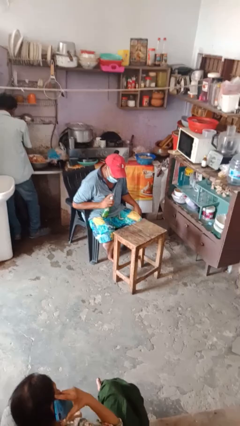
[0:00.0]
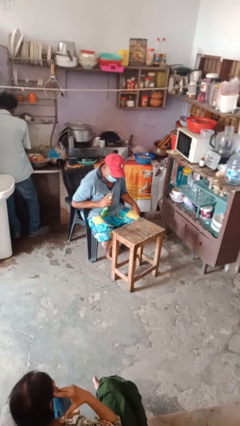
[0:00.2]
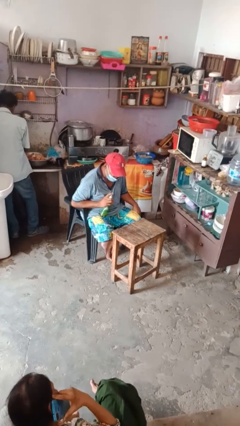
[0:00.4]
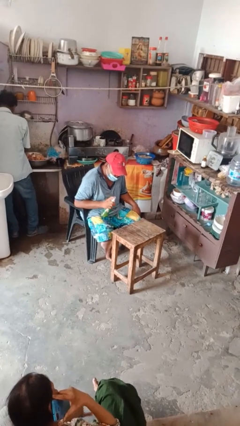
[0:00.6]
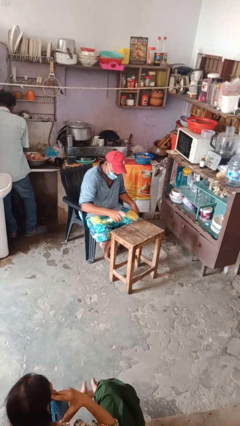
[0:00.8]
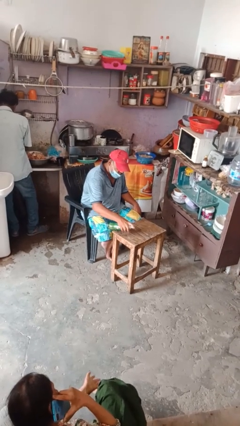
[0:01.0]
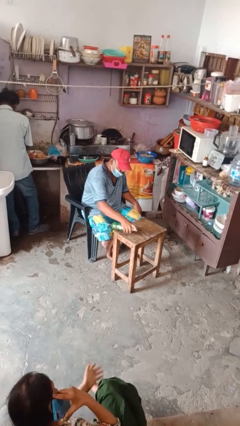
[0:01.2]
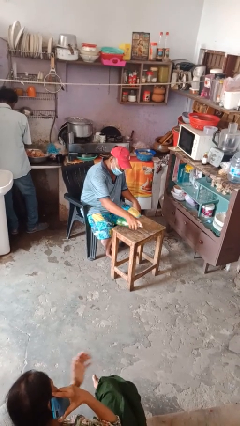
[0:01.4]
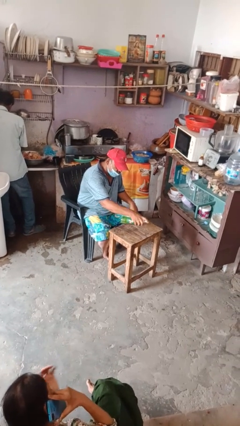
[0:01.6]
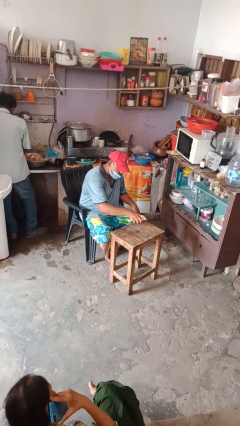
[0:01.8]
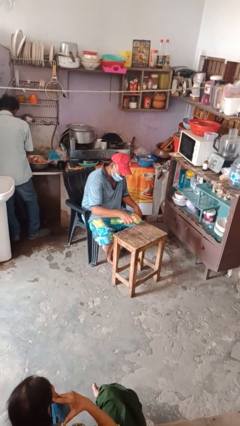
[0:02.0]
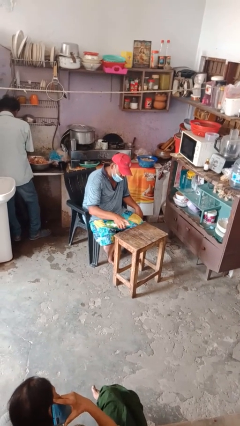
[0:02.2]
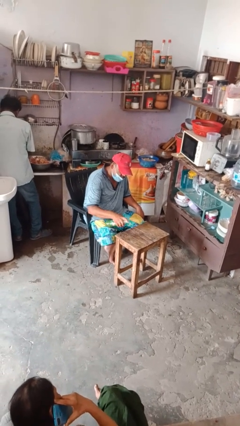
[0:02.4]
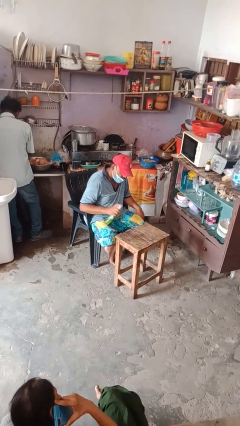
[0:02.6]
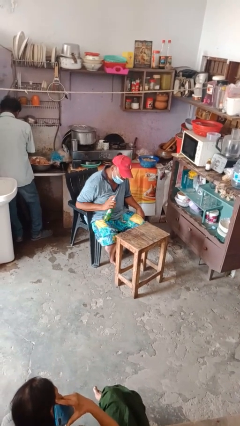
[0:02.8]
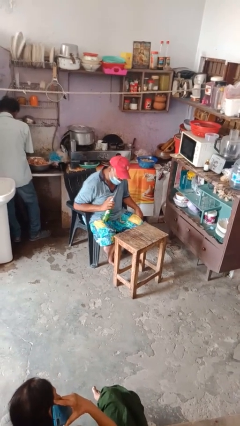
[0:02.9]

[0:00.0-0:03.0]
person sprays from bottle

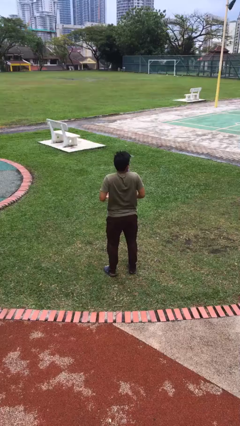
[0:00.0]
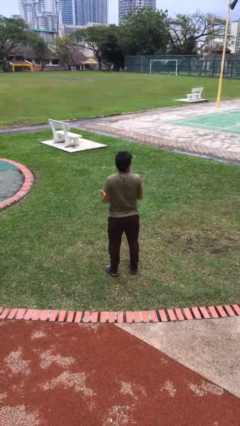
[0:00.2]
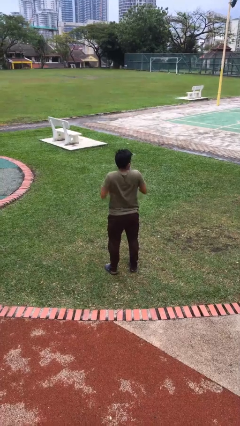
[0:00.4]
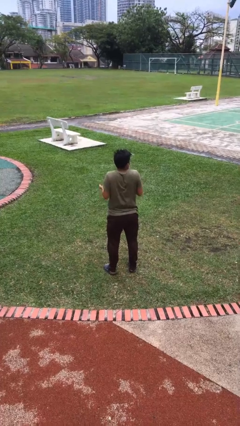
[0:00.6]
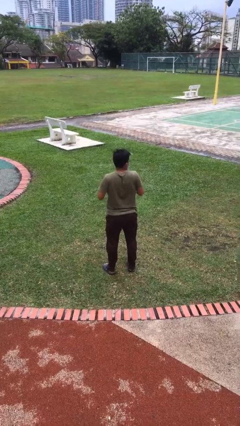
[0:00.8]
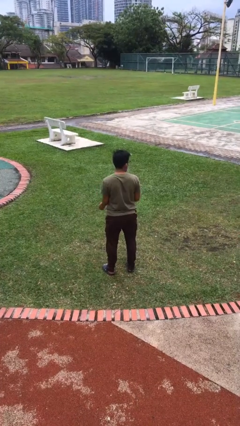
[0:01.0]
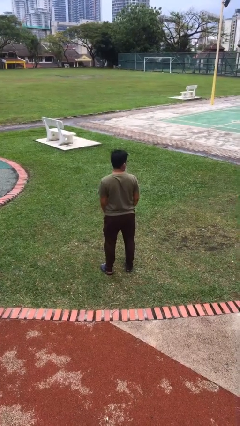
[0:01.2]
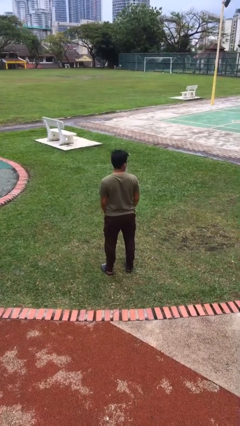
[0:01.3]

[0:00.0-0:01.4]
person shrugs

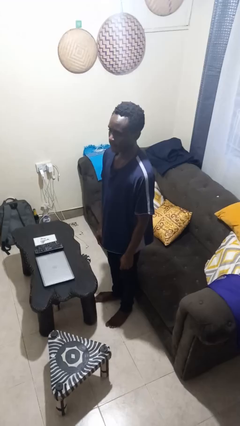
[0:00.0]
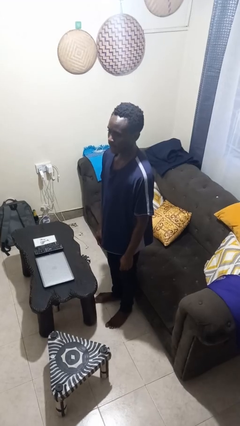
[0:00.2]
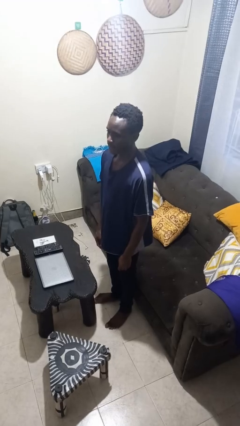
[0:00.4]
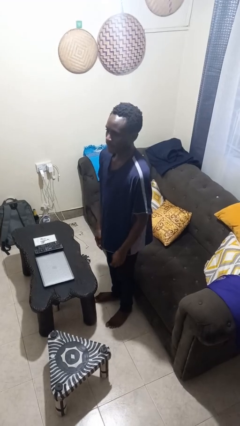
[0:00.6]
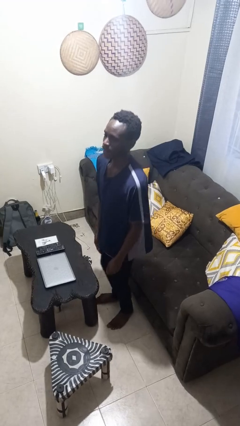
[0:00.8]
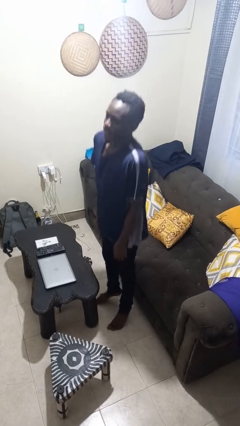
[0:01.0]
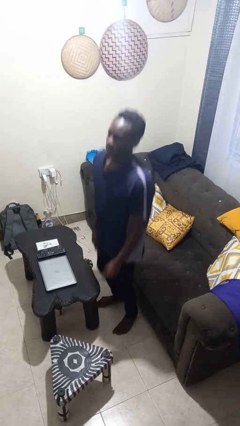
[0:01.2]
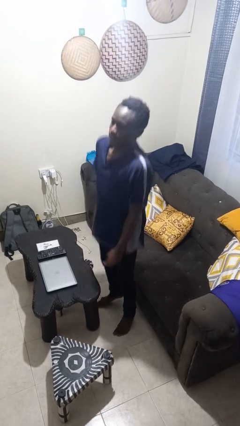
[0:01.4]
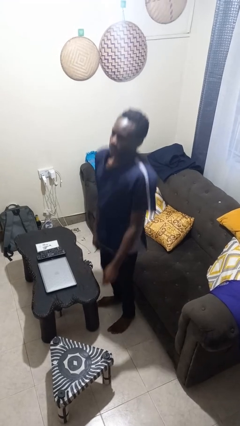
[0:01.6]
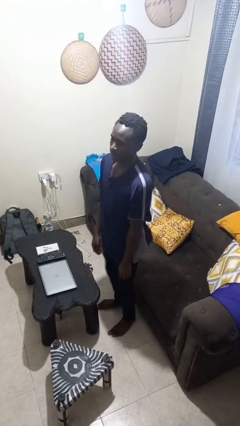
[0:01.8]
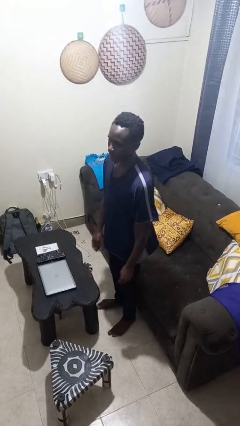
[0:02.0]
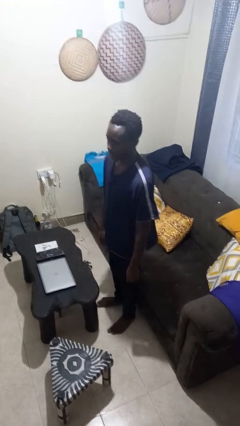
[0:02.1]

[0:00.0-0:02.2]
person jumps

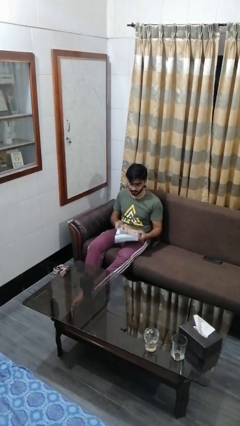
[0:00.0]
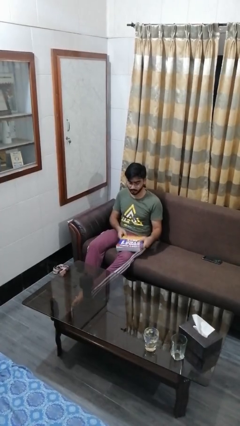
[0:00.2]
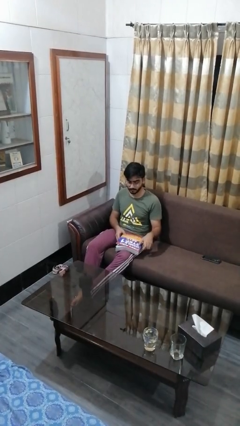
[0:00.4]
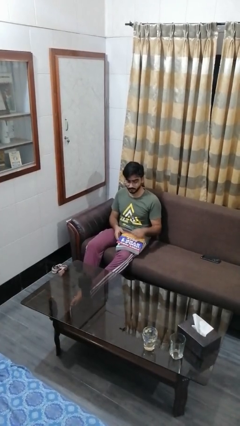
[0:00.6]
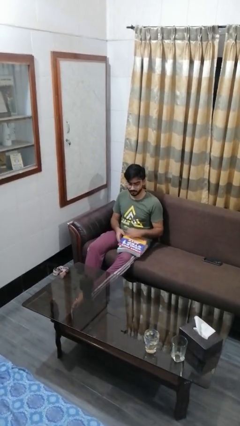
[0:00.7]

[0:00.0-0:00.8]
person reads book

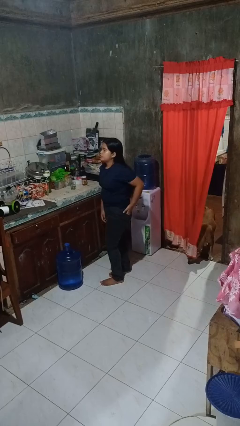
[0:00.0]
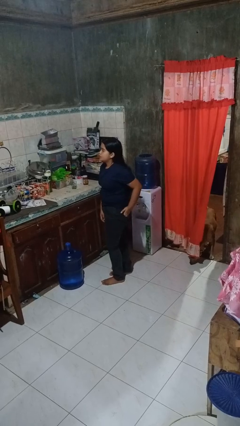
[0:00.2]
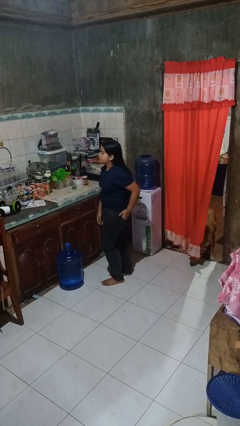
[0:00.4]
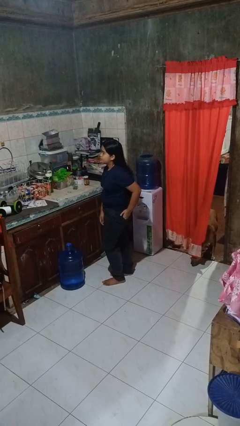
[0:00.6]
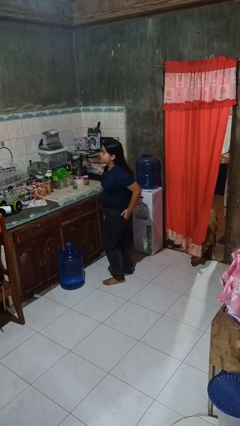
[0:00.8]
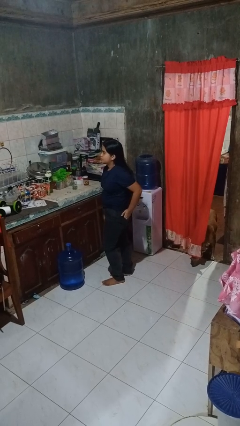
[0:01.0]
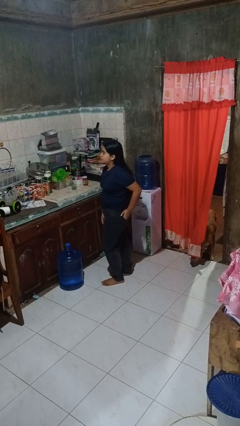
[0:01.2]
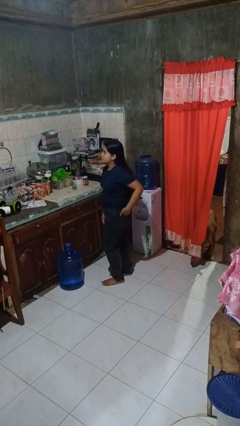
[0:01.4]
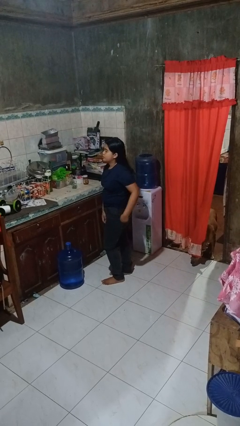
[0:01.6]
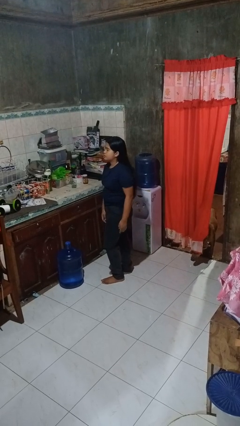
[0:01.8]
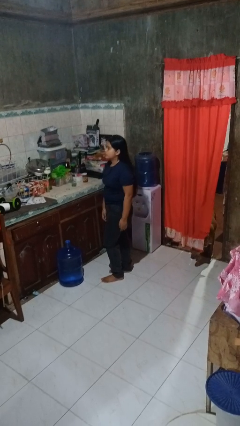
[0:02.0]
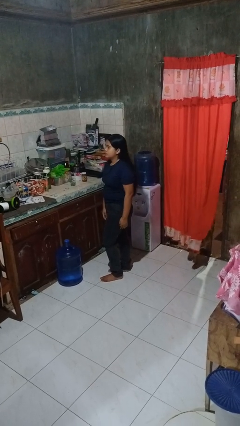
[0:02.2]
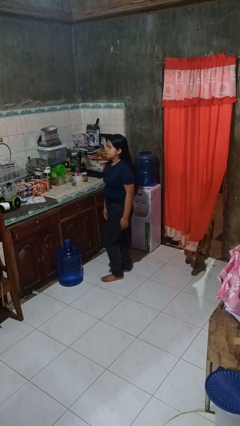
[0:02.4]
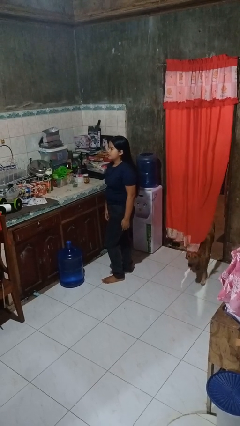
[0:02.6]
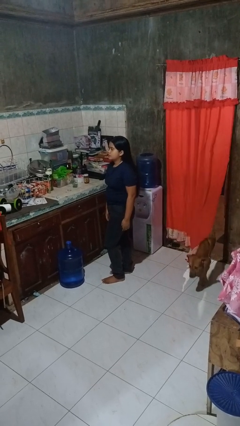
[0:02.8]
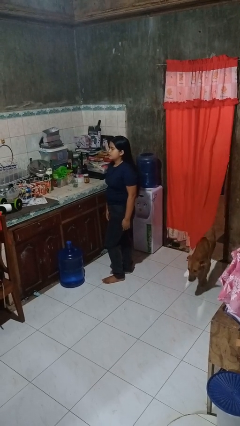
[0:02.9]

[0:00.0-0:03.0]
person puts hands in back pockets

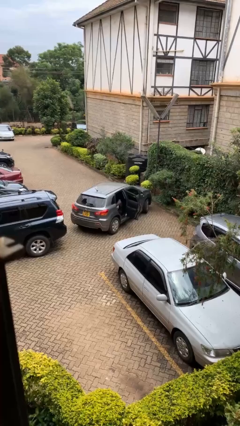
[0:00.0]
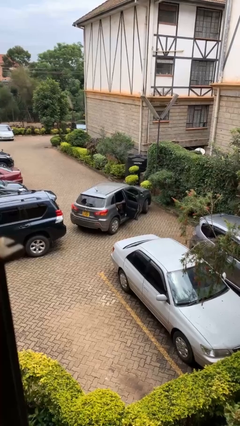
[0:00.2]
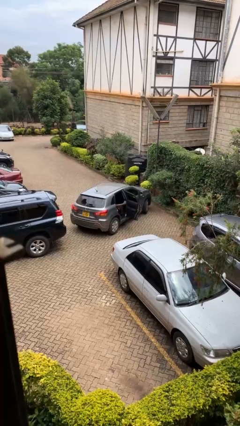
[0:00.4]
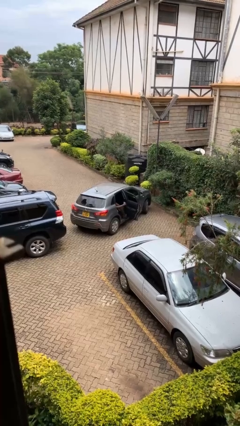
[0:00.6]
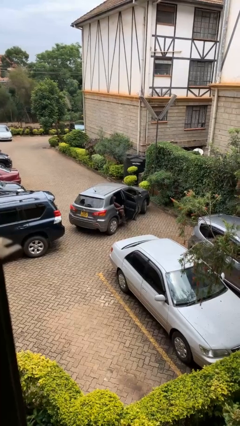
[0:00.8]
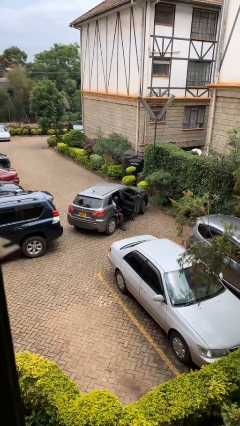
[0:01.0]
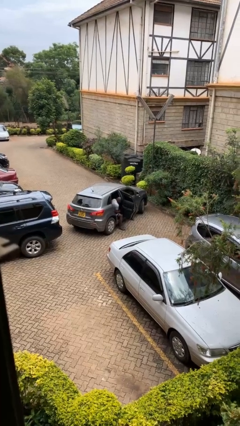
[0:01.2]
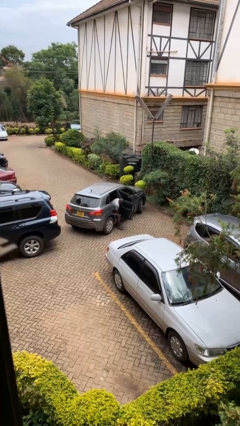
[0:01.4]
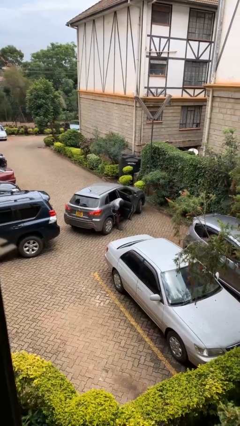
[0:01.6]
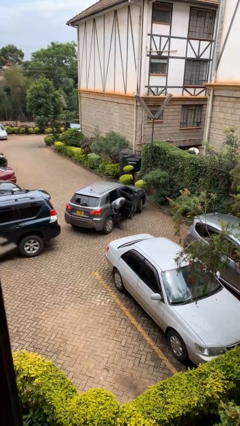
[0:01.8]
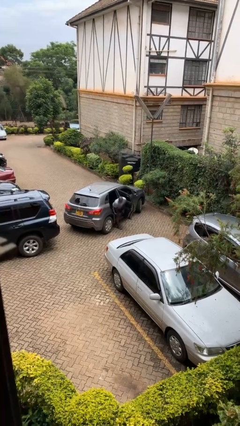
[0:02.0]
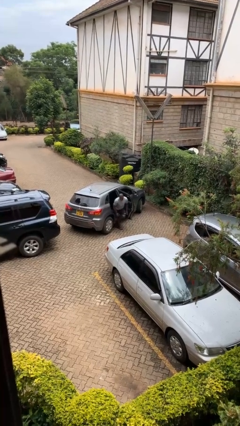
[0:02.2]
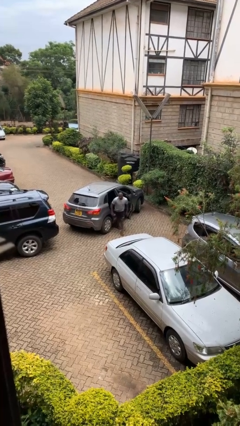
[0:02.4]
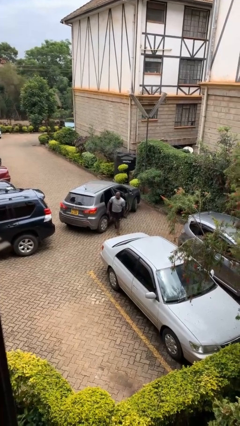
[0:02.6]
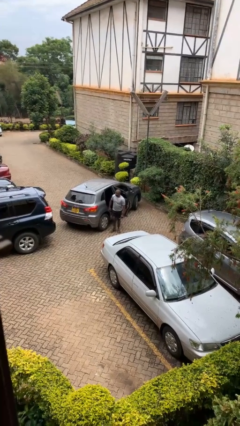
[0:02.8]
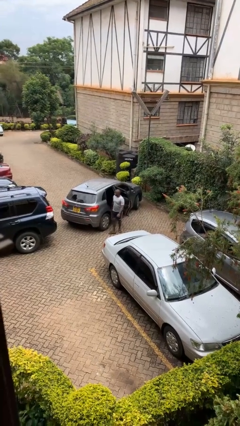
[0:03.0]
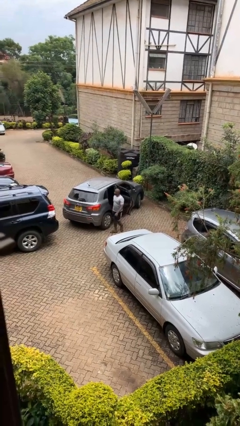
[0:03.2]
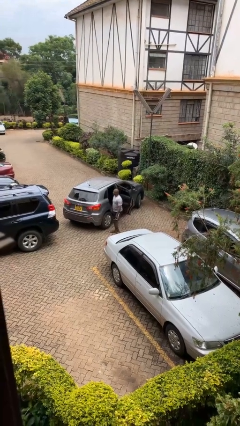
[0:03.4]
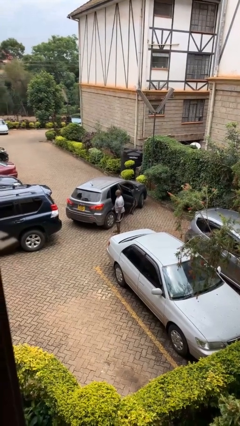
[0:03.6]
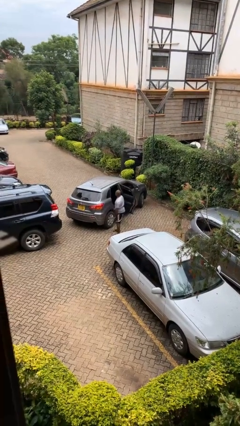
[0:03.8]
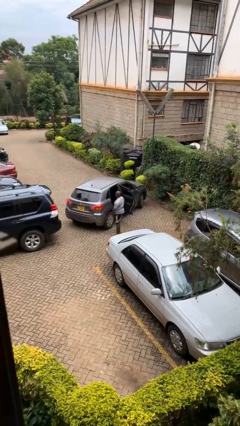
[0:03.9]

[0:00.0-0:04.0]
person exits car

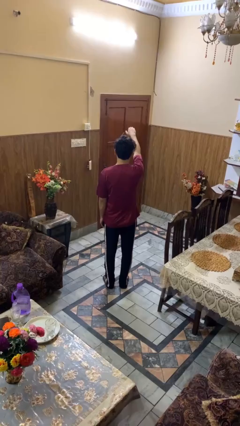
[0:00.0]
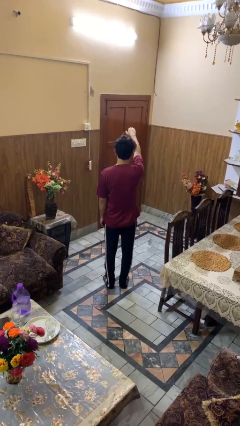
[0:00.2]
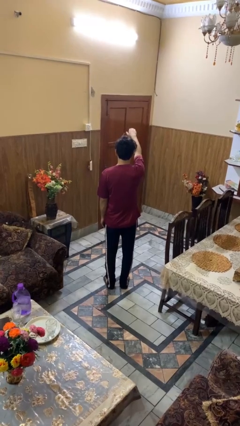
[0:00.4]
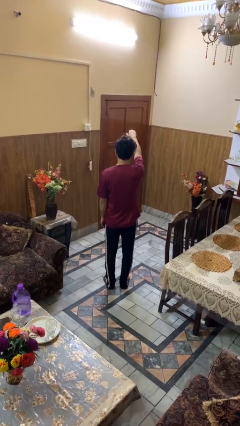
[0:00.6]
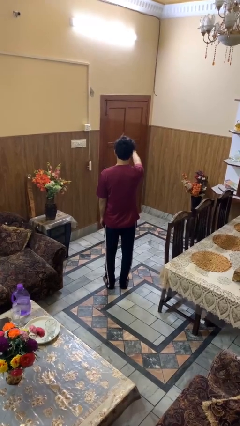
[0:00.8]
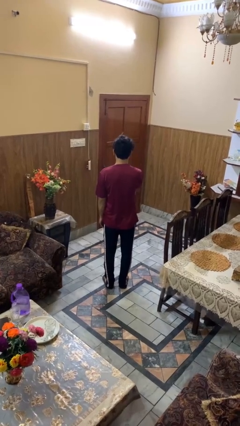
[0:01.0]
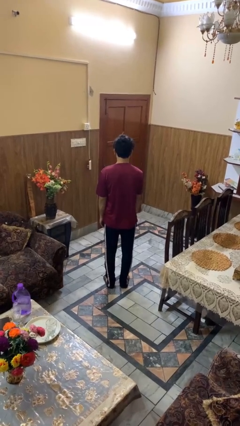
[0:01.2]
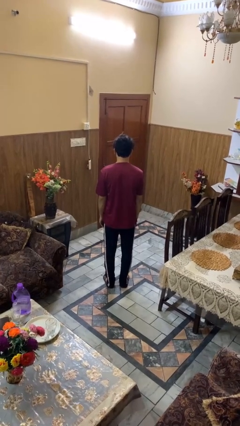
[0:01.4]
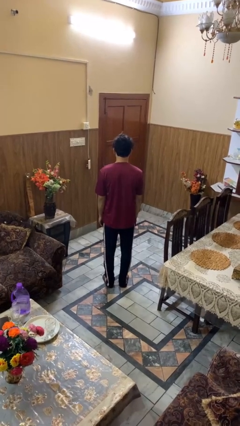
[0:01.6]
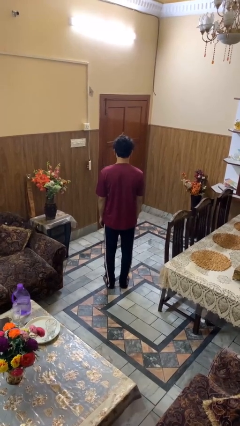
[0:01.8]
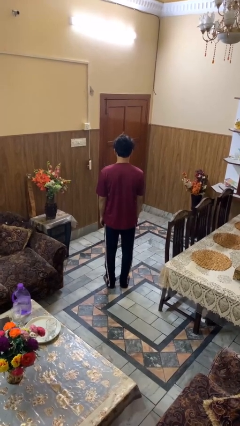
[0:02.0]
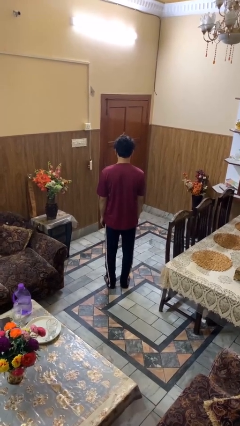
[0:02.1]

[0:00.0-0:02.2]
person gestures swipe down

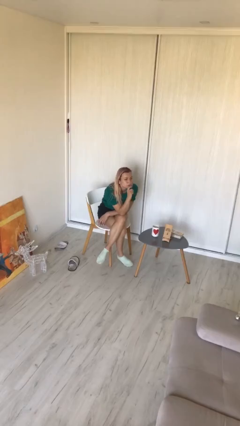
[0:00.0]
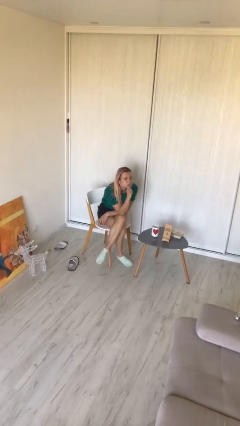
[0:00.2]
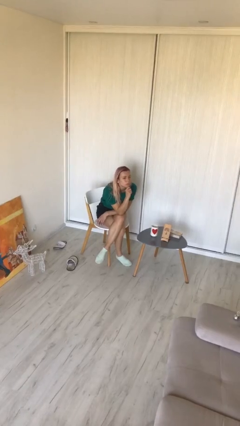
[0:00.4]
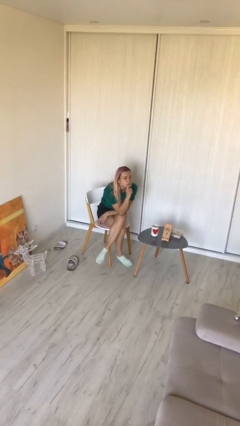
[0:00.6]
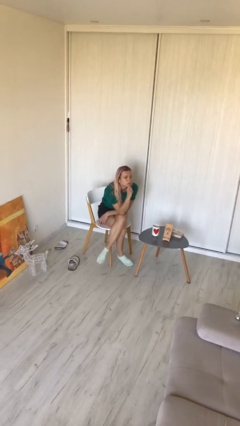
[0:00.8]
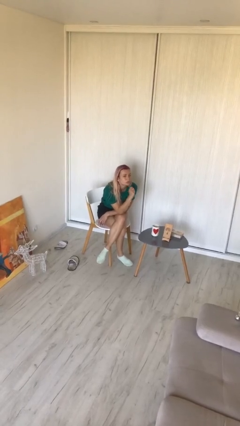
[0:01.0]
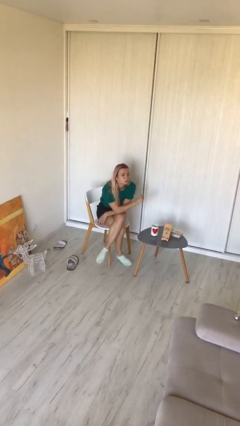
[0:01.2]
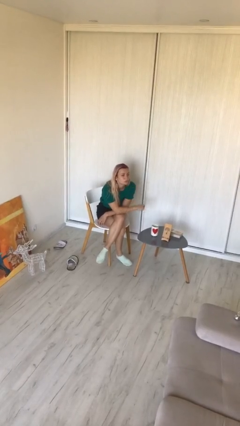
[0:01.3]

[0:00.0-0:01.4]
person strokes chin